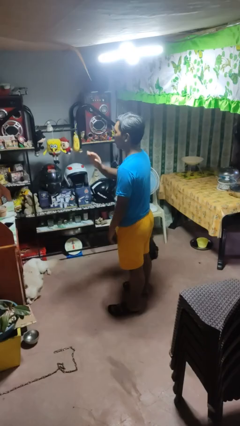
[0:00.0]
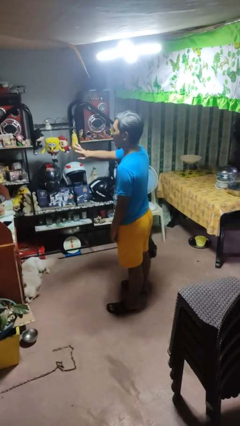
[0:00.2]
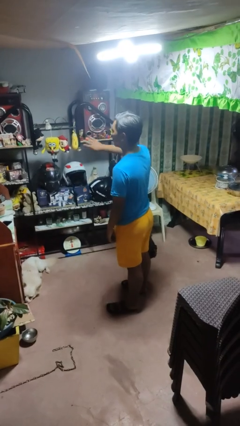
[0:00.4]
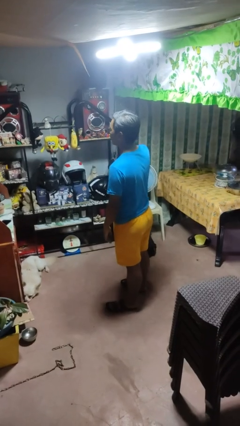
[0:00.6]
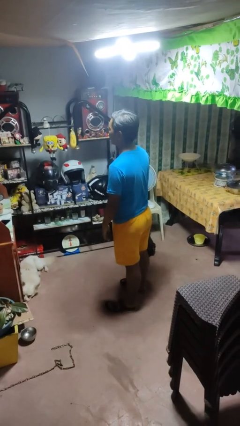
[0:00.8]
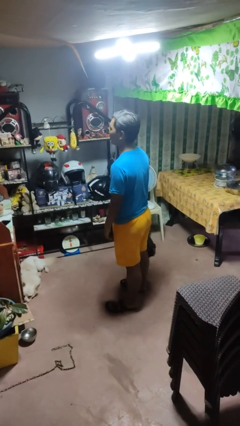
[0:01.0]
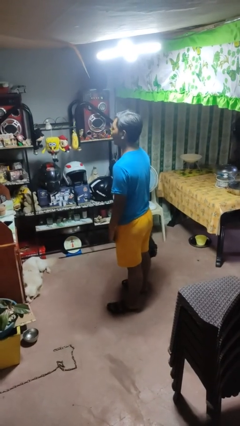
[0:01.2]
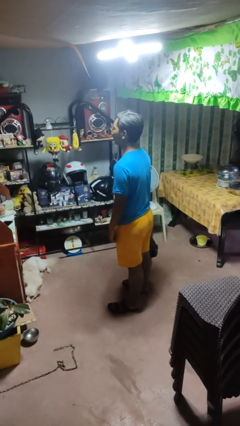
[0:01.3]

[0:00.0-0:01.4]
person gestures swipe right

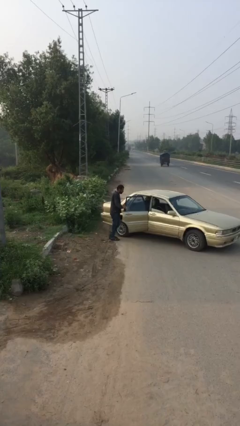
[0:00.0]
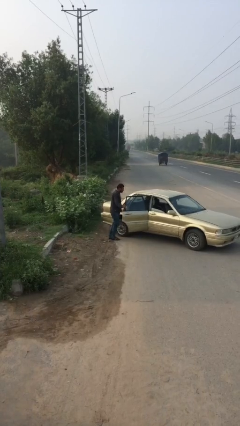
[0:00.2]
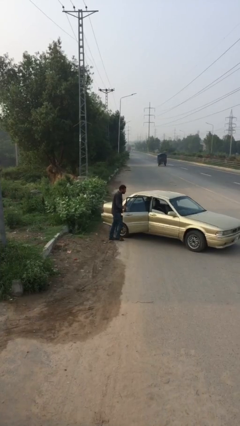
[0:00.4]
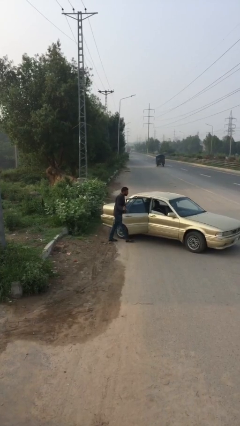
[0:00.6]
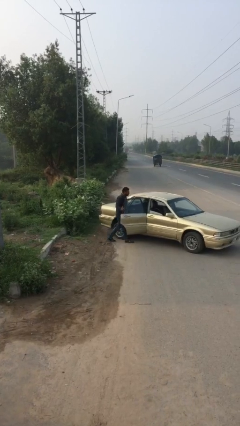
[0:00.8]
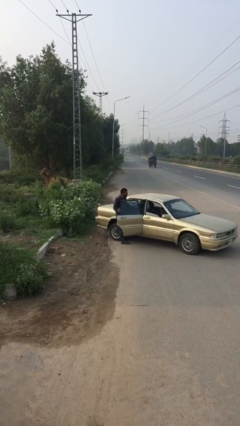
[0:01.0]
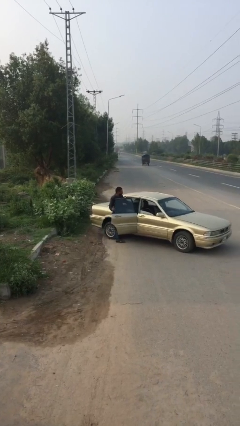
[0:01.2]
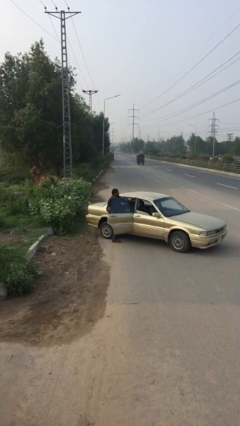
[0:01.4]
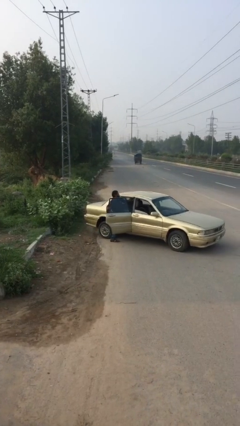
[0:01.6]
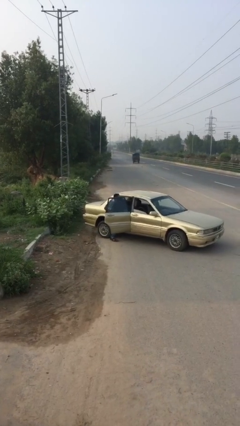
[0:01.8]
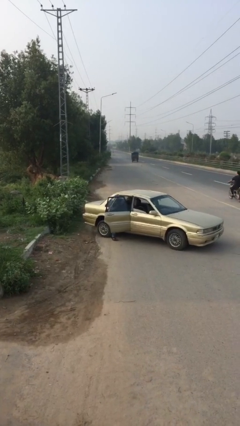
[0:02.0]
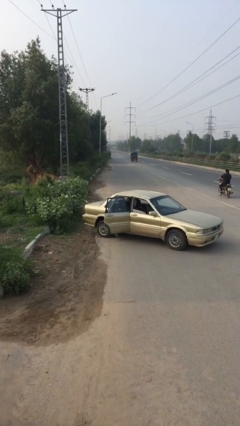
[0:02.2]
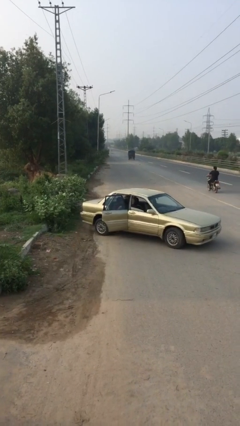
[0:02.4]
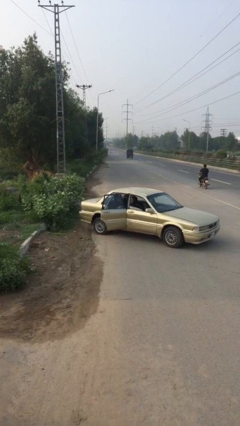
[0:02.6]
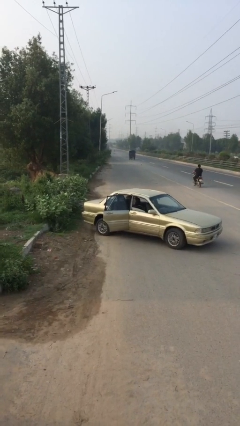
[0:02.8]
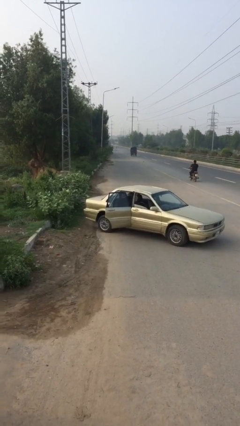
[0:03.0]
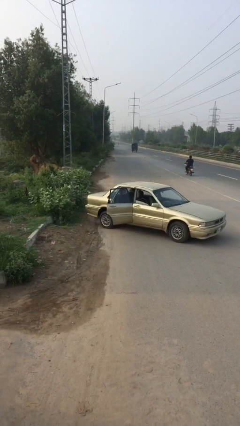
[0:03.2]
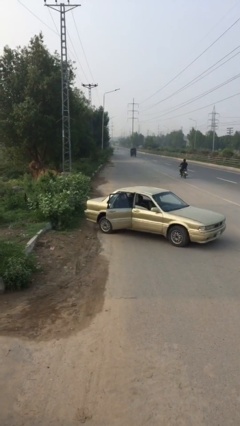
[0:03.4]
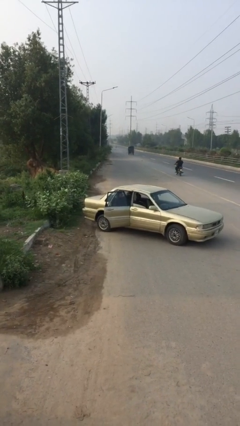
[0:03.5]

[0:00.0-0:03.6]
person enters car

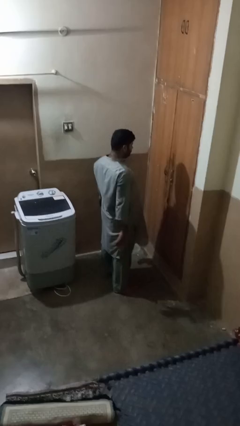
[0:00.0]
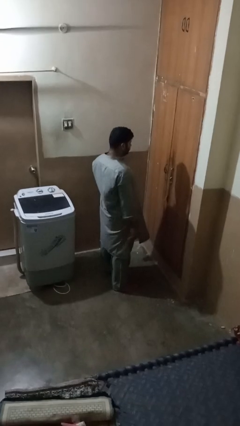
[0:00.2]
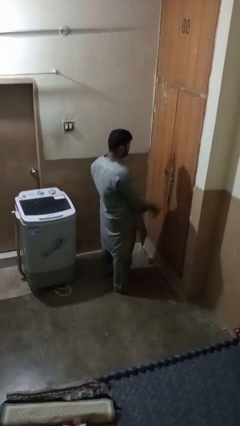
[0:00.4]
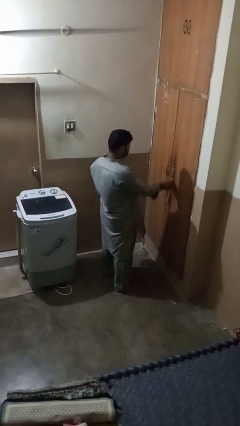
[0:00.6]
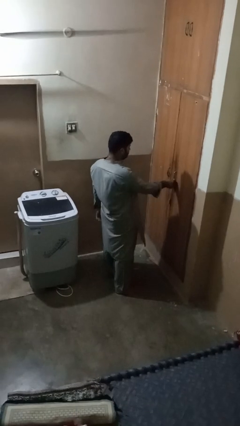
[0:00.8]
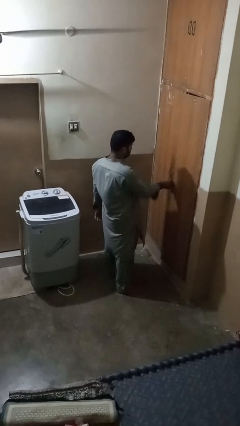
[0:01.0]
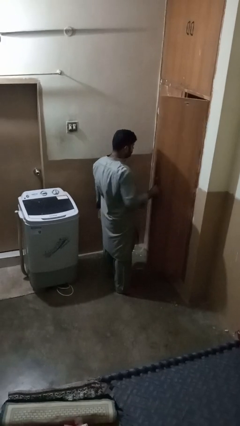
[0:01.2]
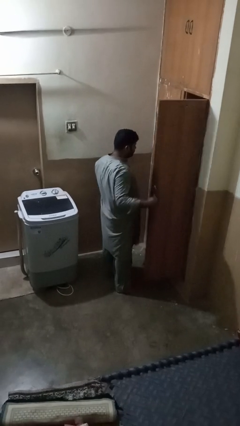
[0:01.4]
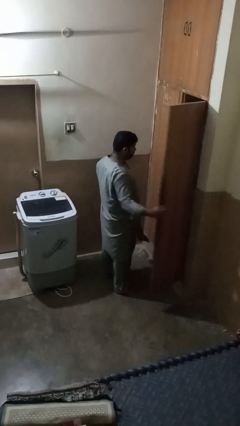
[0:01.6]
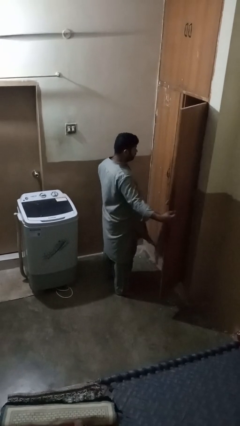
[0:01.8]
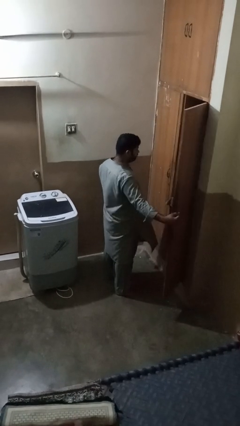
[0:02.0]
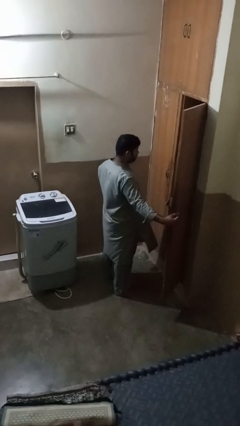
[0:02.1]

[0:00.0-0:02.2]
person opens closet door

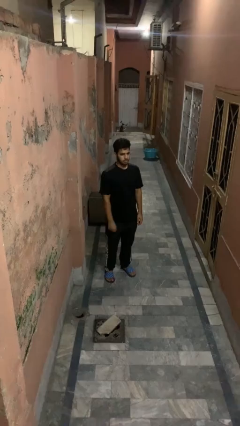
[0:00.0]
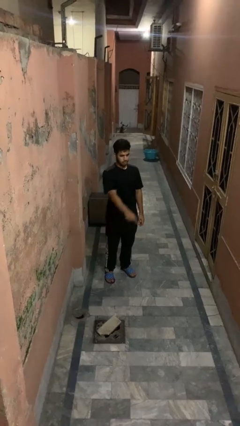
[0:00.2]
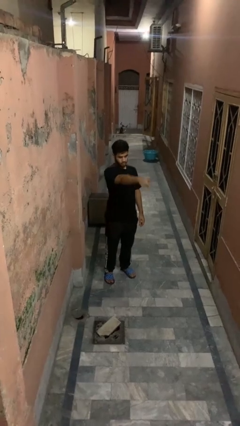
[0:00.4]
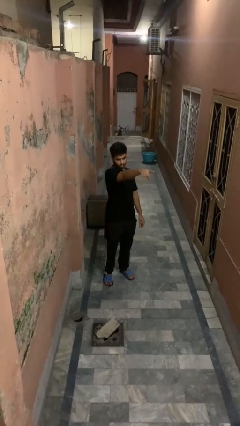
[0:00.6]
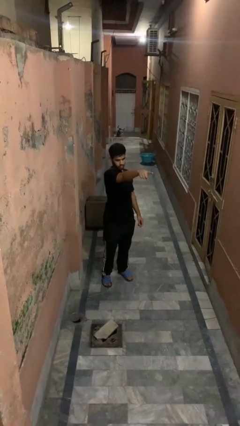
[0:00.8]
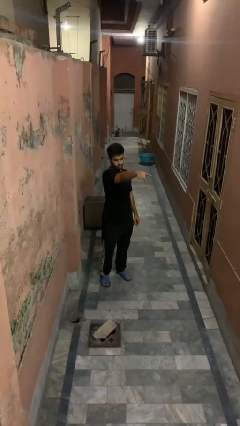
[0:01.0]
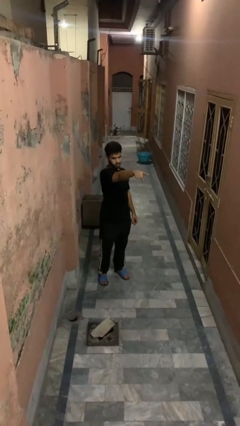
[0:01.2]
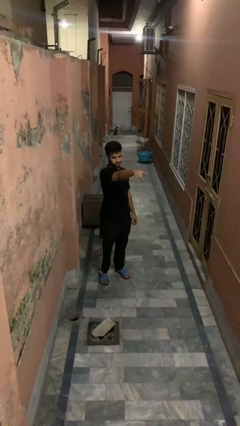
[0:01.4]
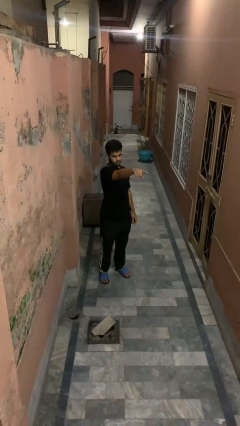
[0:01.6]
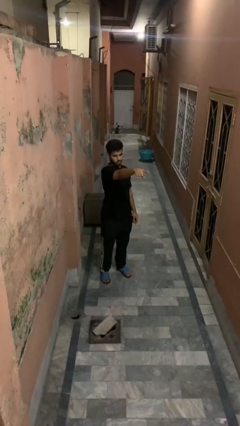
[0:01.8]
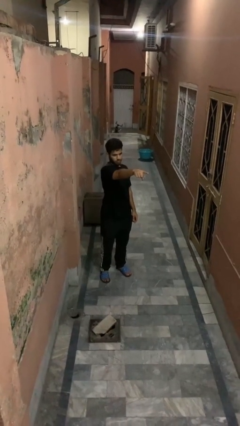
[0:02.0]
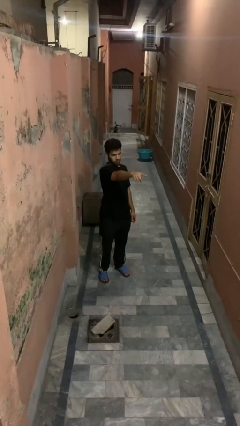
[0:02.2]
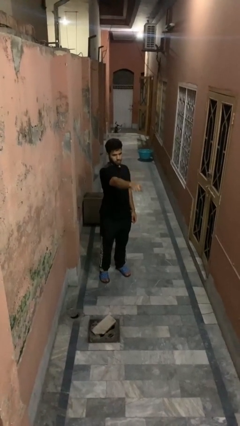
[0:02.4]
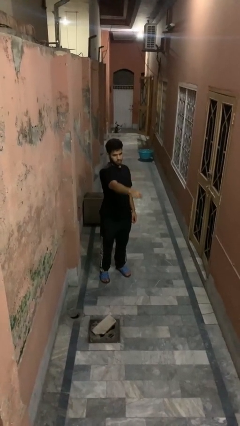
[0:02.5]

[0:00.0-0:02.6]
person points at person

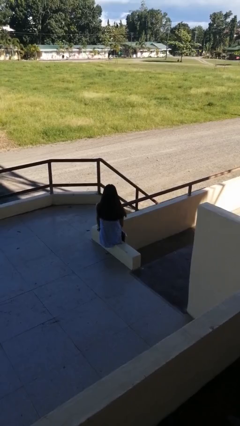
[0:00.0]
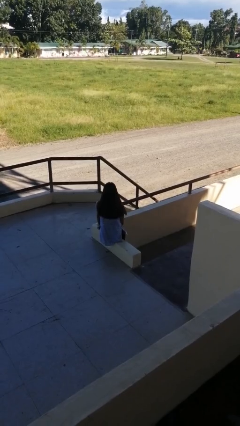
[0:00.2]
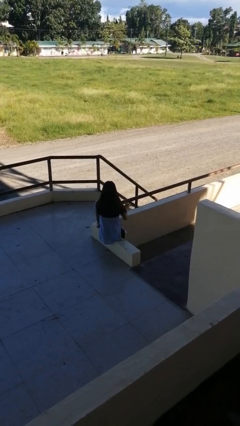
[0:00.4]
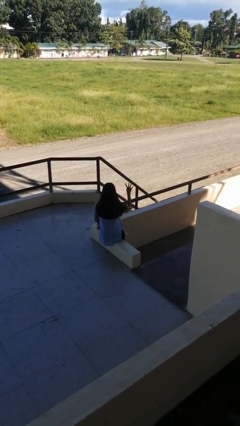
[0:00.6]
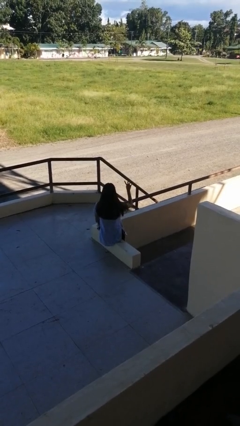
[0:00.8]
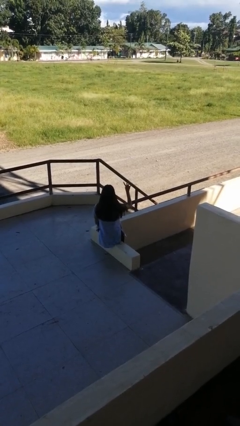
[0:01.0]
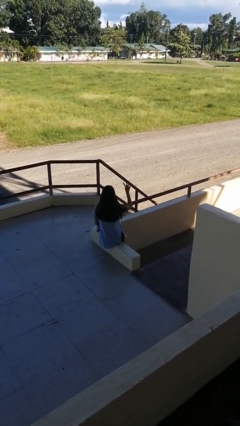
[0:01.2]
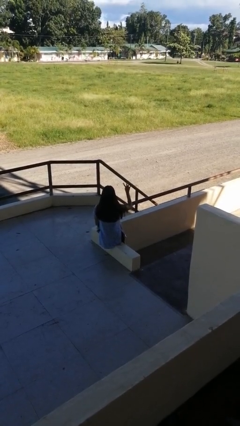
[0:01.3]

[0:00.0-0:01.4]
person gestures number four

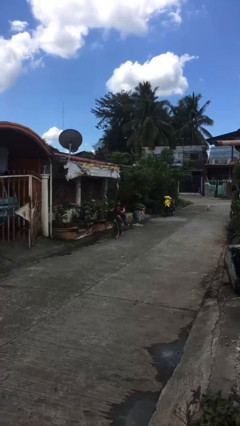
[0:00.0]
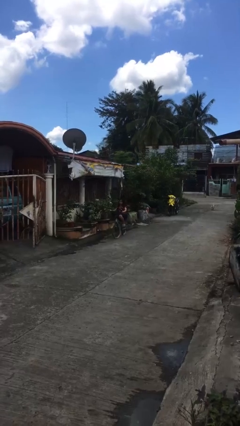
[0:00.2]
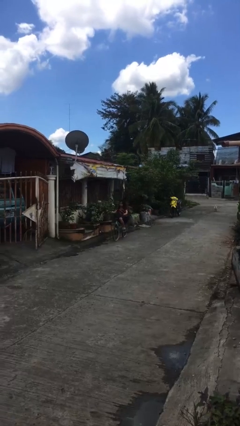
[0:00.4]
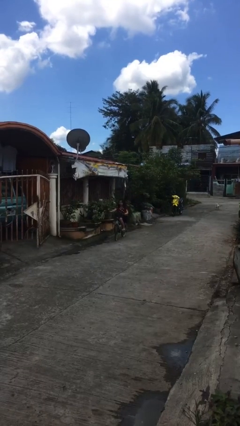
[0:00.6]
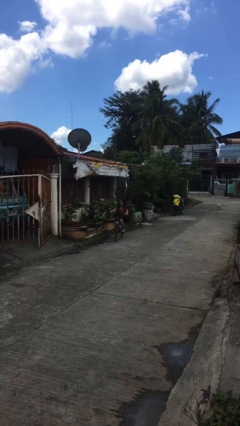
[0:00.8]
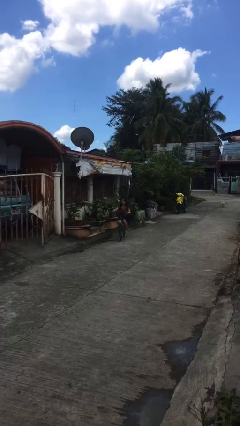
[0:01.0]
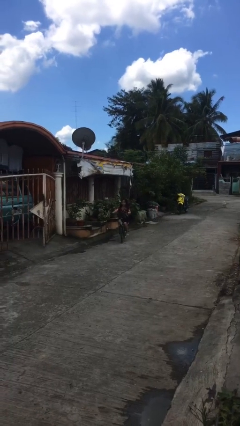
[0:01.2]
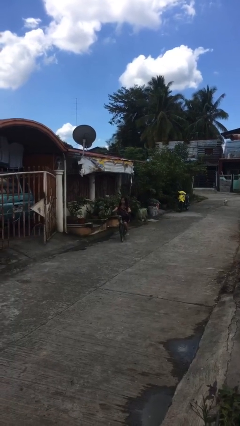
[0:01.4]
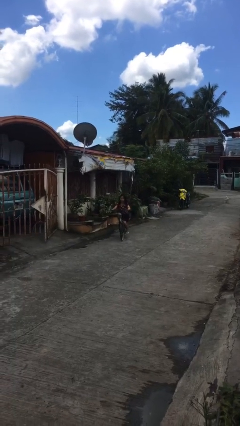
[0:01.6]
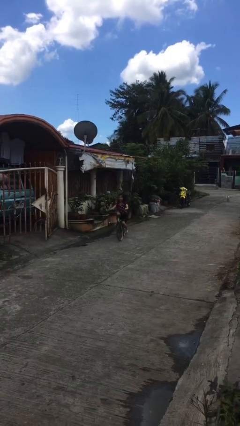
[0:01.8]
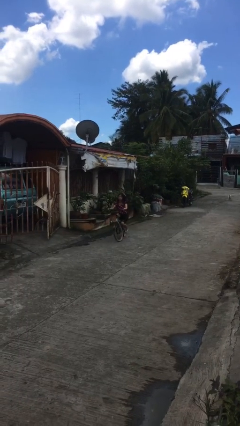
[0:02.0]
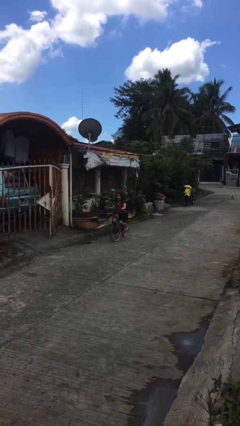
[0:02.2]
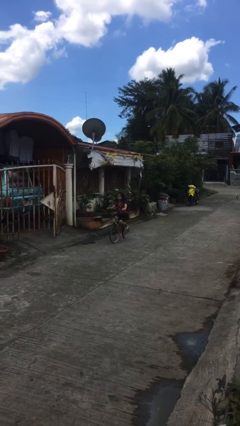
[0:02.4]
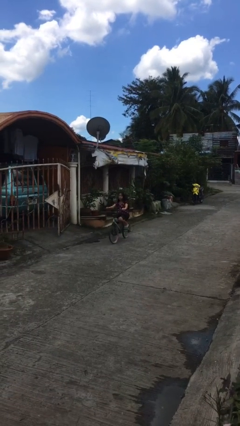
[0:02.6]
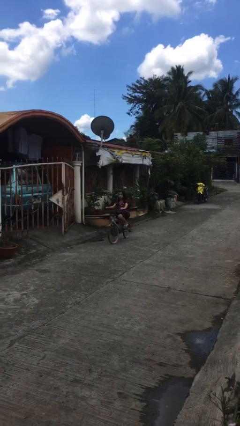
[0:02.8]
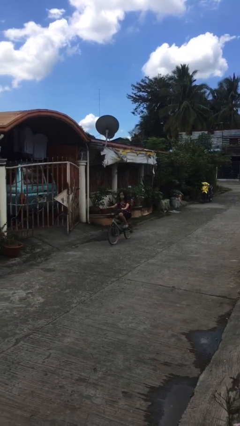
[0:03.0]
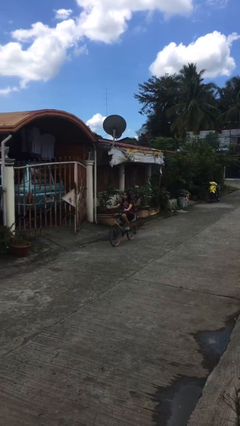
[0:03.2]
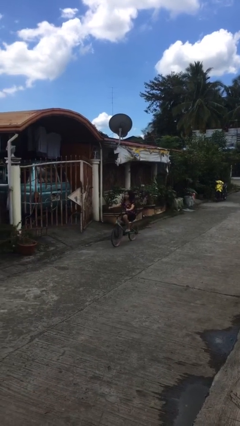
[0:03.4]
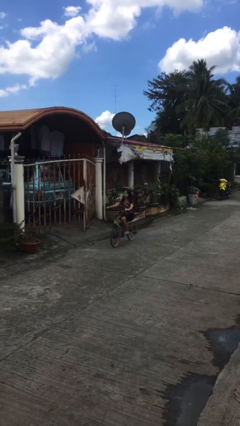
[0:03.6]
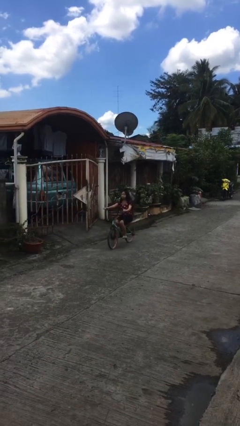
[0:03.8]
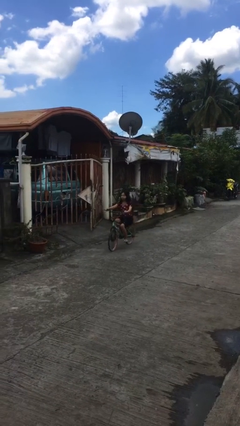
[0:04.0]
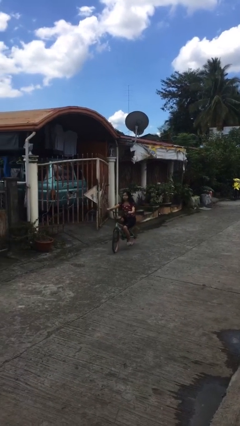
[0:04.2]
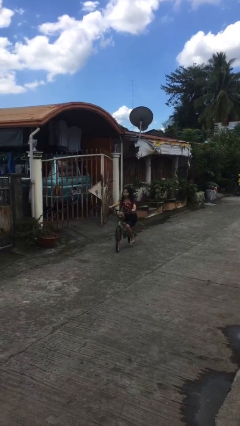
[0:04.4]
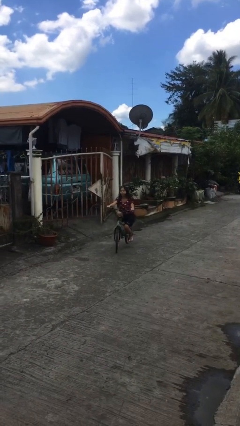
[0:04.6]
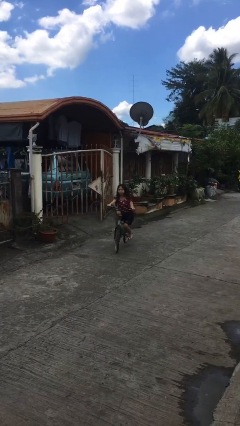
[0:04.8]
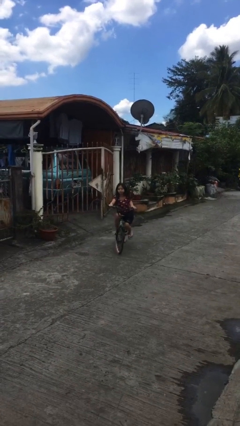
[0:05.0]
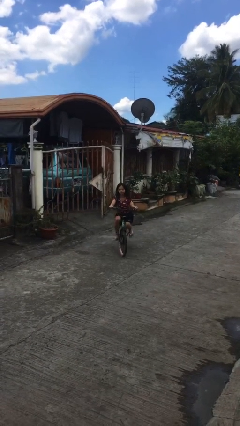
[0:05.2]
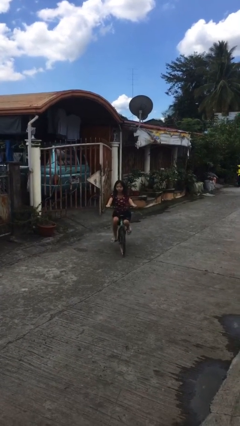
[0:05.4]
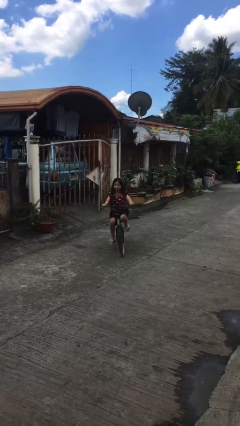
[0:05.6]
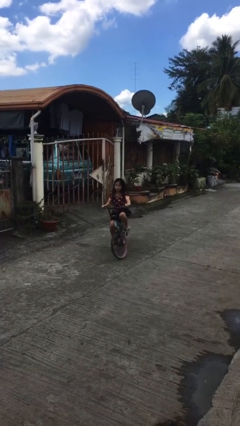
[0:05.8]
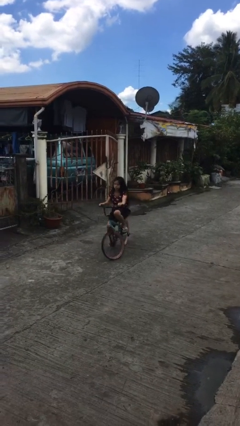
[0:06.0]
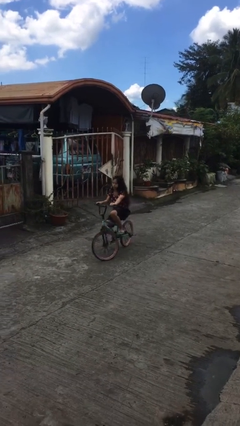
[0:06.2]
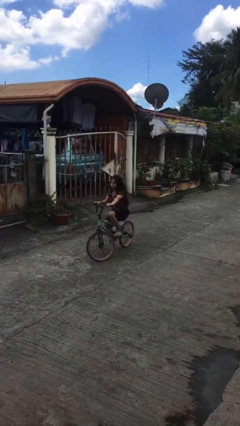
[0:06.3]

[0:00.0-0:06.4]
person rides bicycle
